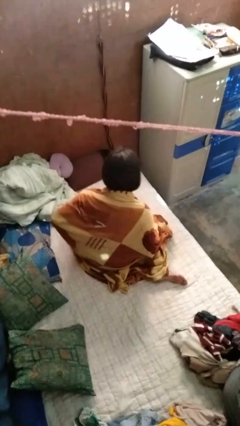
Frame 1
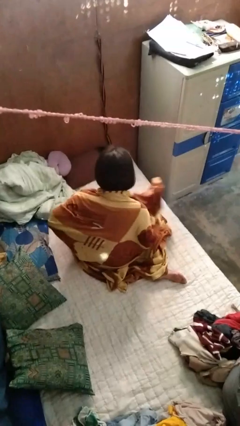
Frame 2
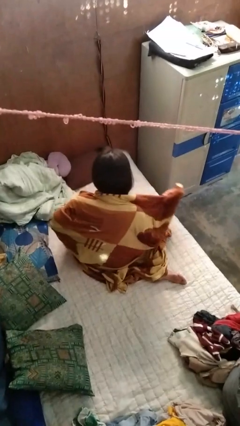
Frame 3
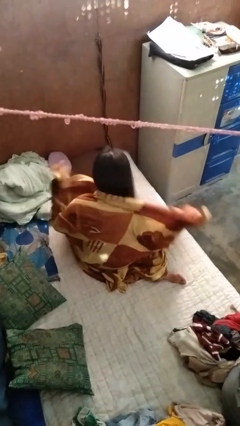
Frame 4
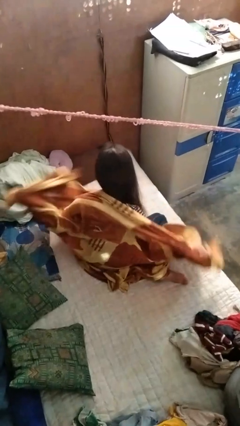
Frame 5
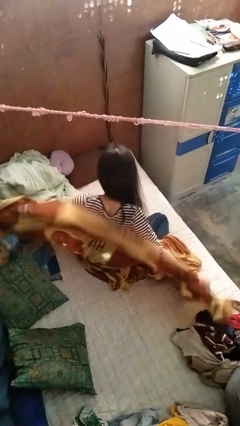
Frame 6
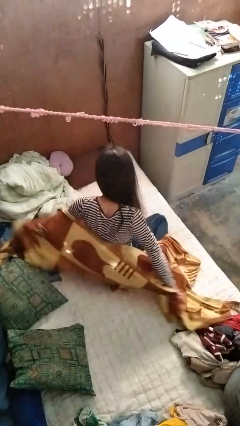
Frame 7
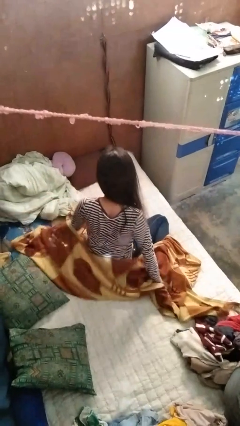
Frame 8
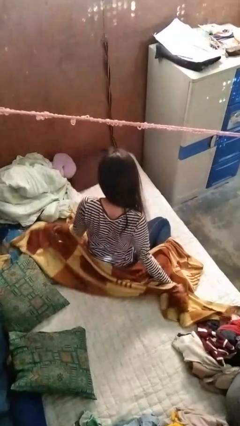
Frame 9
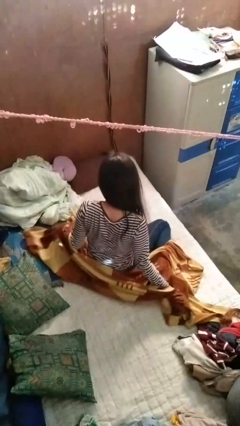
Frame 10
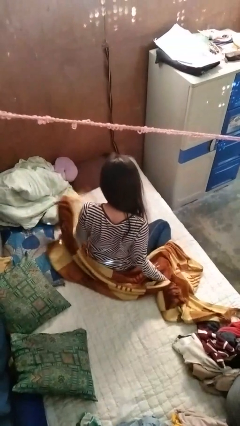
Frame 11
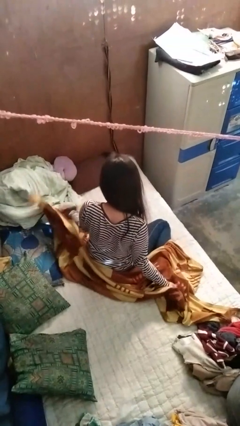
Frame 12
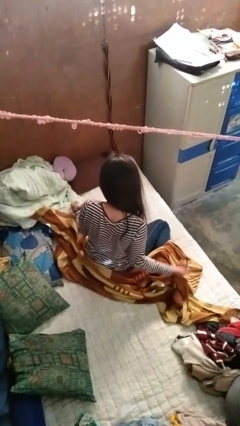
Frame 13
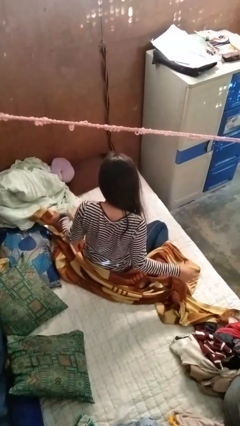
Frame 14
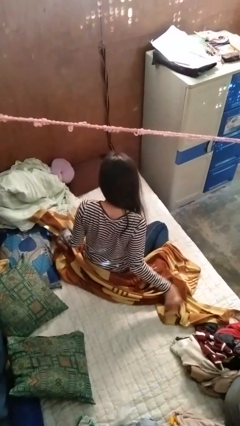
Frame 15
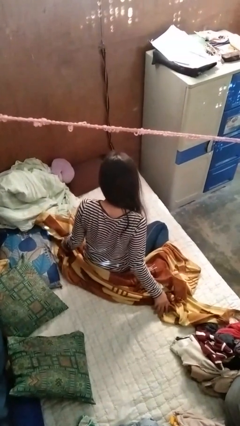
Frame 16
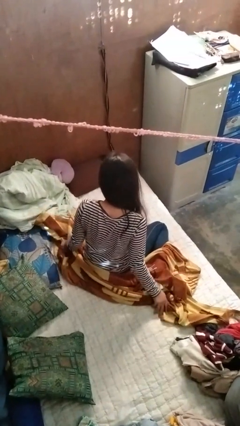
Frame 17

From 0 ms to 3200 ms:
person uncovers with blanket

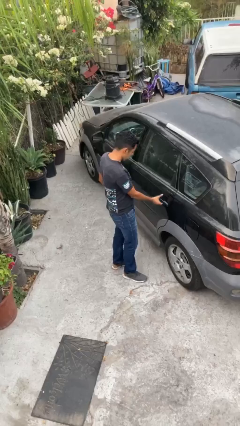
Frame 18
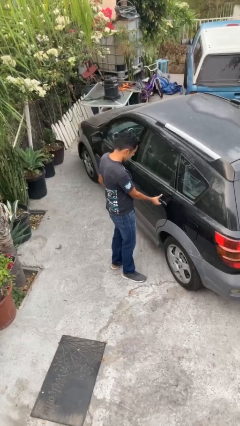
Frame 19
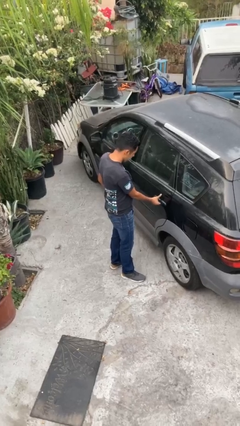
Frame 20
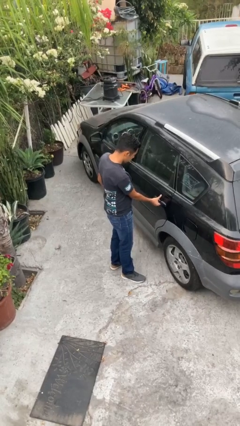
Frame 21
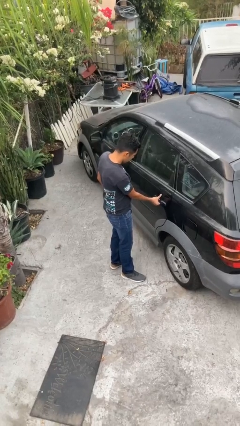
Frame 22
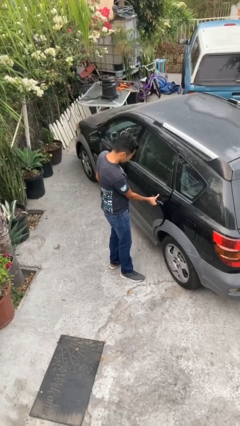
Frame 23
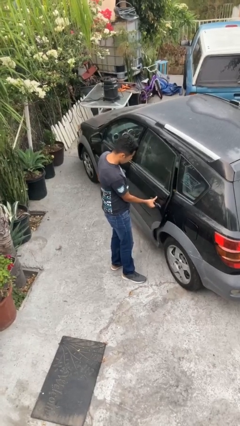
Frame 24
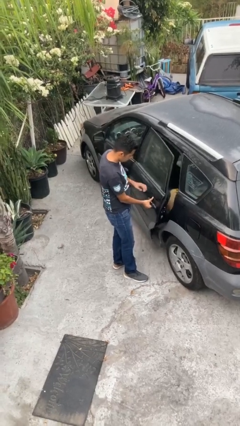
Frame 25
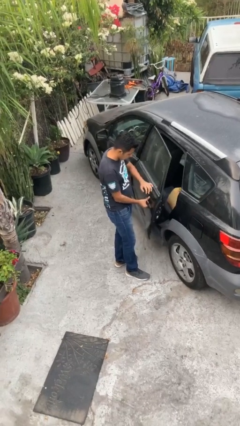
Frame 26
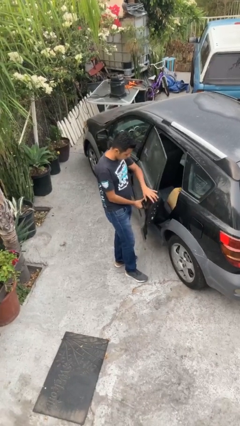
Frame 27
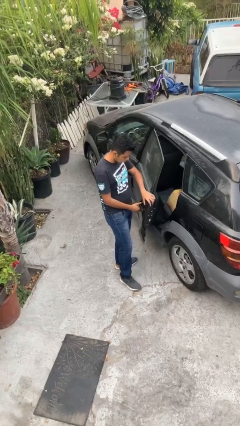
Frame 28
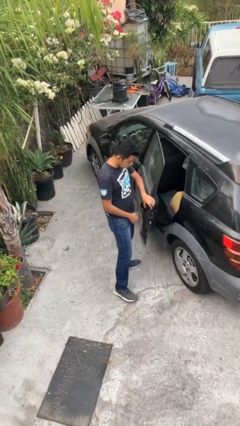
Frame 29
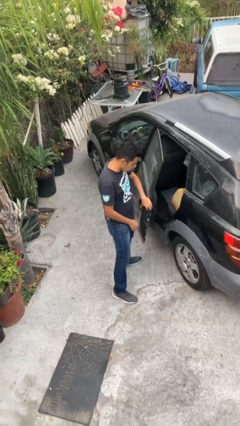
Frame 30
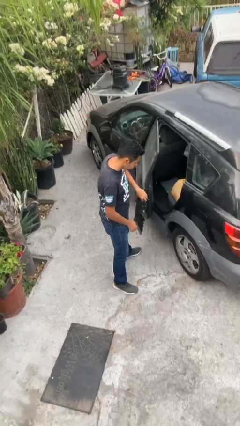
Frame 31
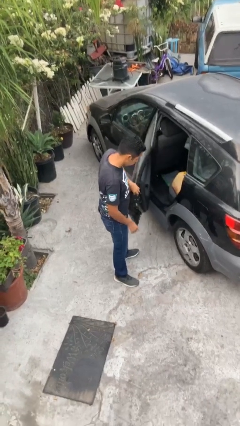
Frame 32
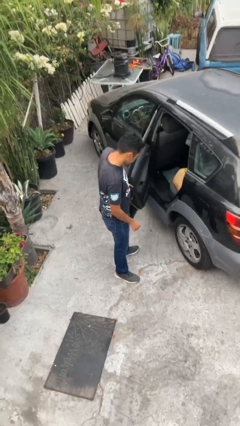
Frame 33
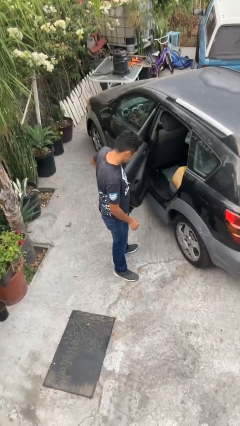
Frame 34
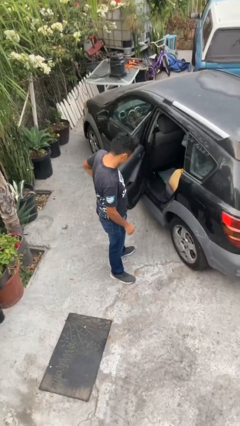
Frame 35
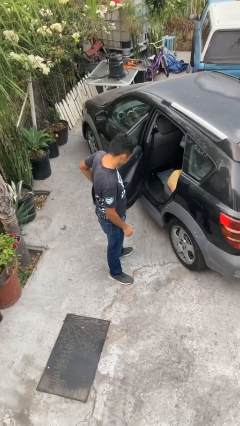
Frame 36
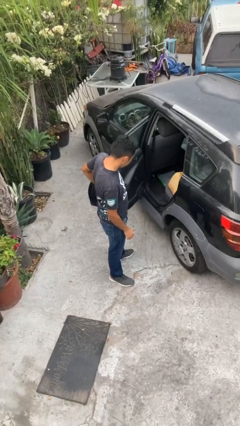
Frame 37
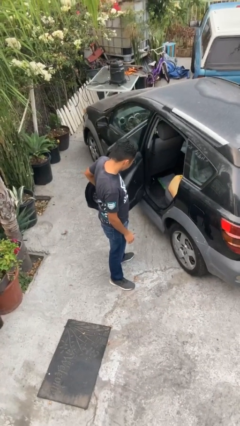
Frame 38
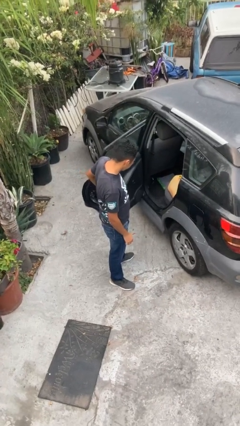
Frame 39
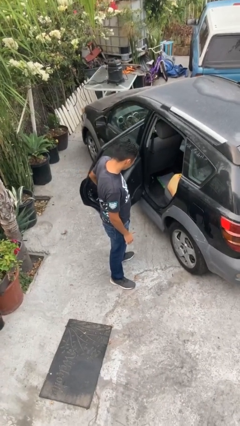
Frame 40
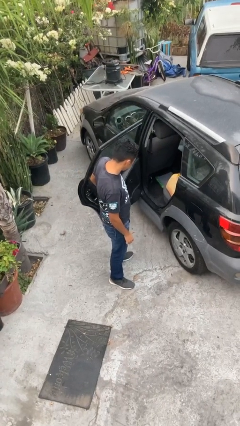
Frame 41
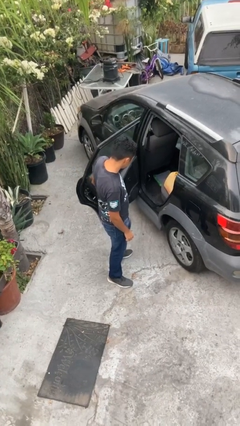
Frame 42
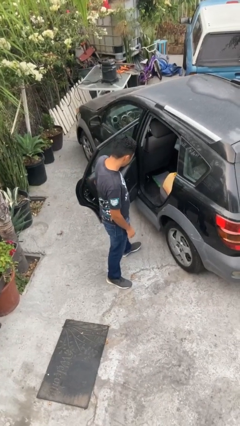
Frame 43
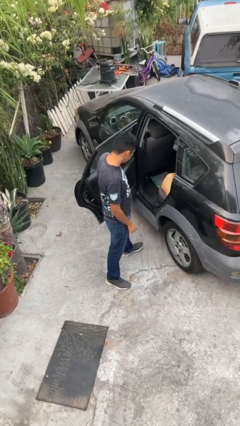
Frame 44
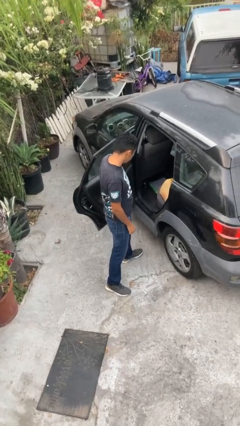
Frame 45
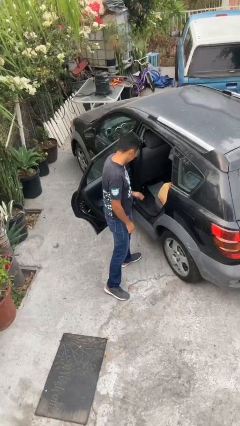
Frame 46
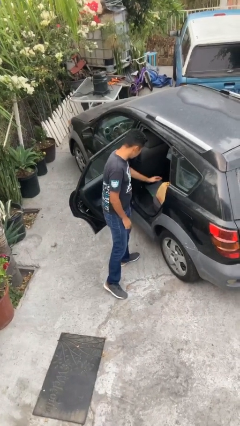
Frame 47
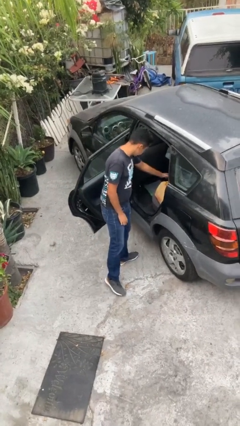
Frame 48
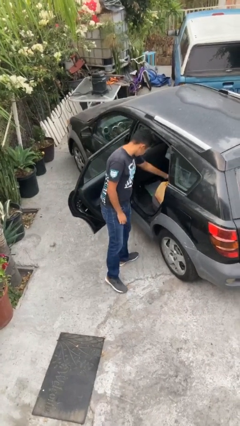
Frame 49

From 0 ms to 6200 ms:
person opens car door

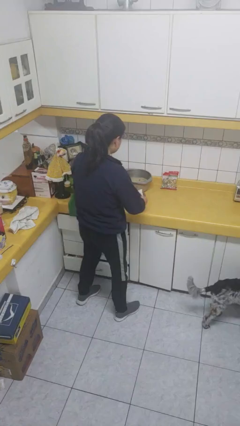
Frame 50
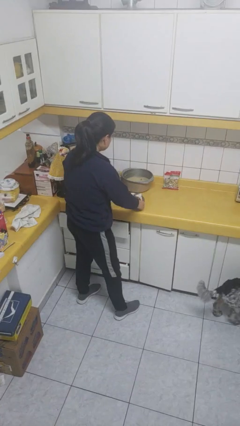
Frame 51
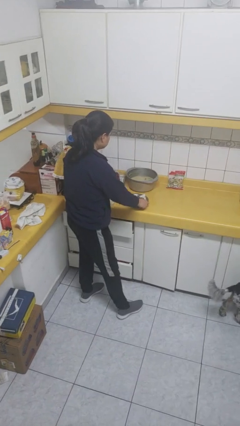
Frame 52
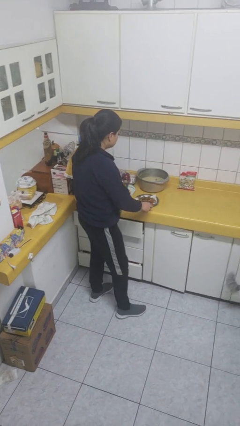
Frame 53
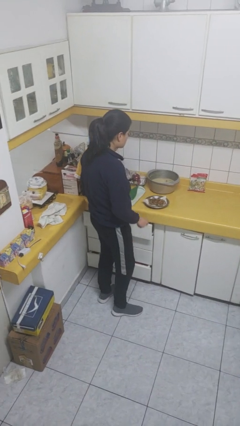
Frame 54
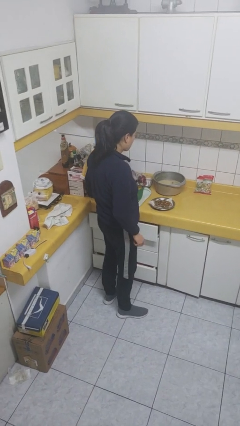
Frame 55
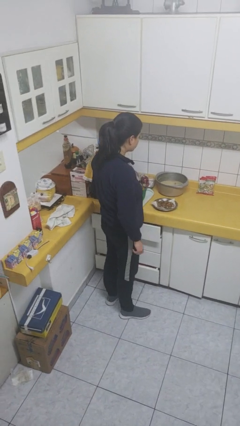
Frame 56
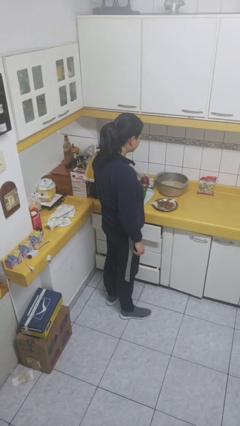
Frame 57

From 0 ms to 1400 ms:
person puts down object on countertop

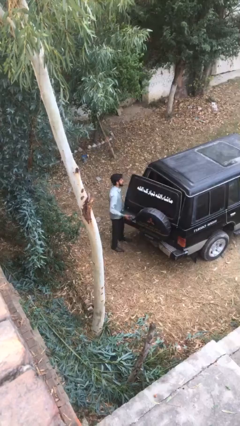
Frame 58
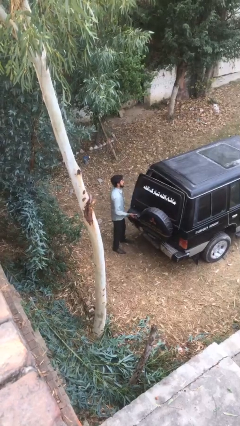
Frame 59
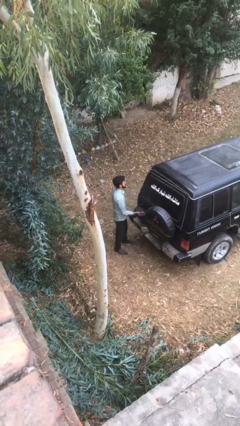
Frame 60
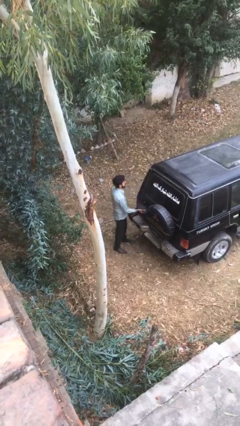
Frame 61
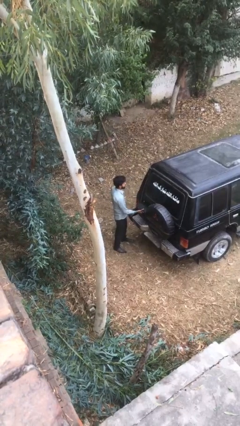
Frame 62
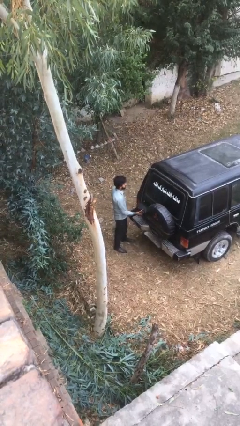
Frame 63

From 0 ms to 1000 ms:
person closes car trunk

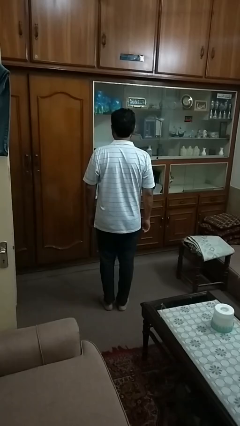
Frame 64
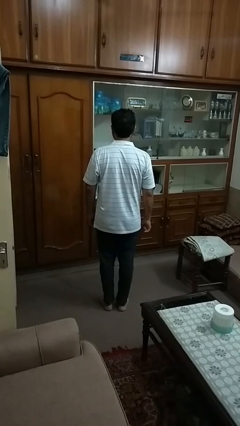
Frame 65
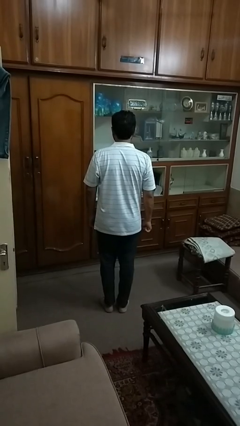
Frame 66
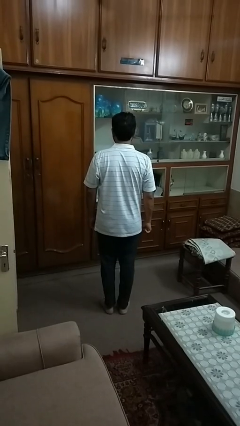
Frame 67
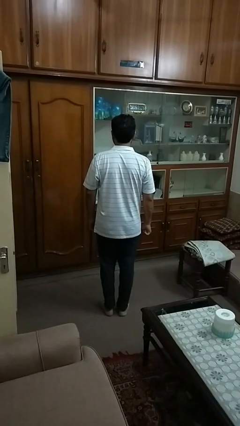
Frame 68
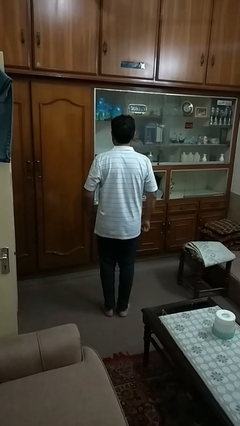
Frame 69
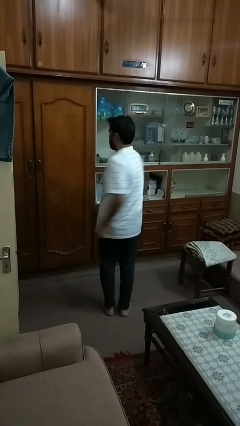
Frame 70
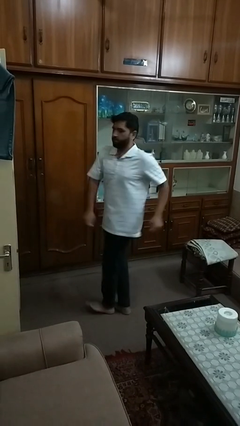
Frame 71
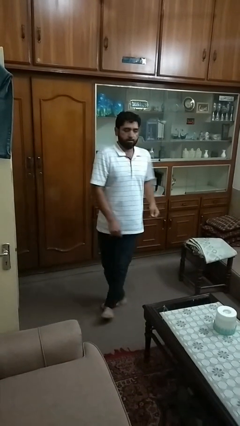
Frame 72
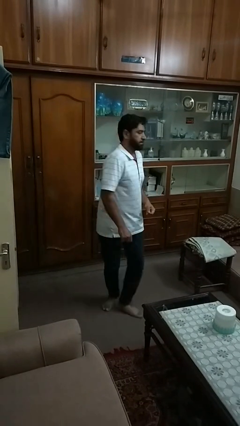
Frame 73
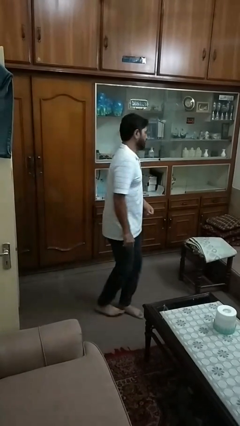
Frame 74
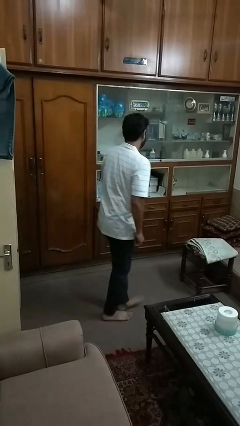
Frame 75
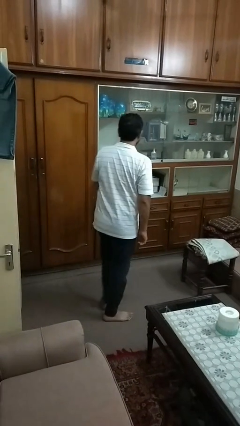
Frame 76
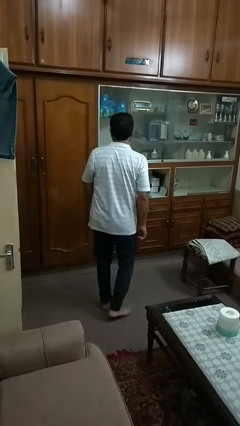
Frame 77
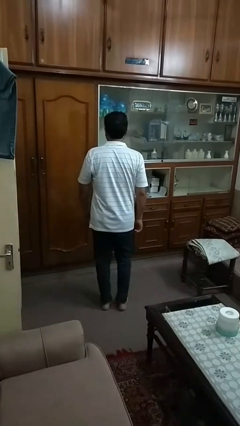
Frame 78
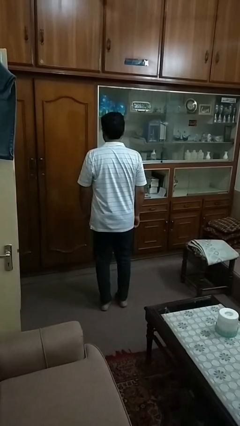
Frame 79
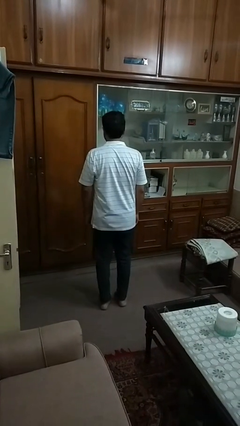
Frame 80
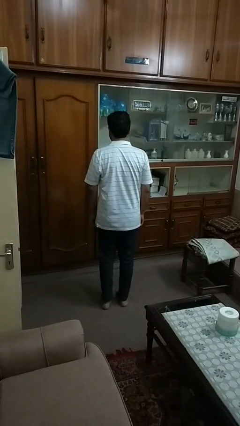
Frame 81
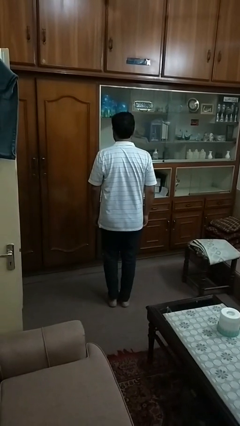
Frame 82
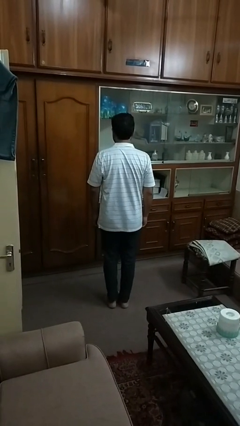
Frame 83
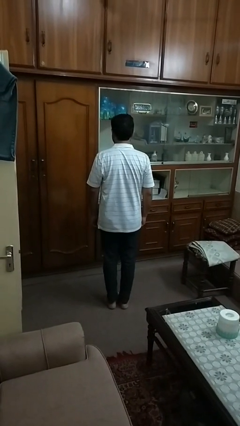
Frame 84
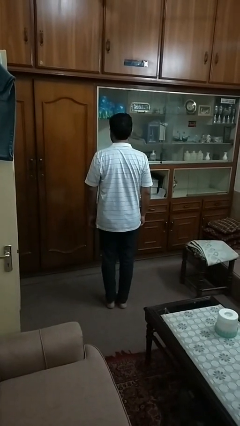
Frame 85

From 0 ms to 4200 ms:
person twirls

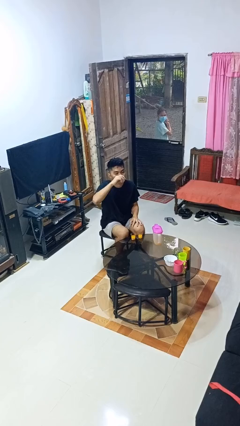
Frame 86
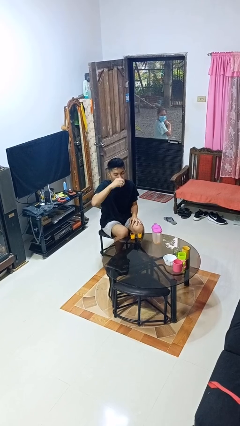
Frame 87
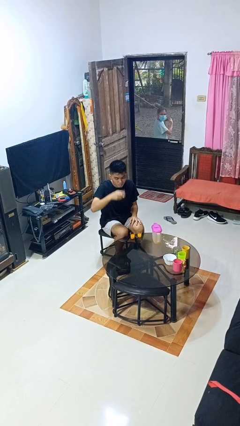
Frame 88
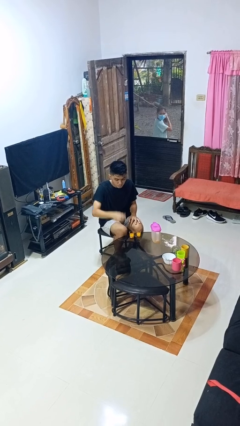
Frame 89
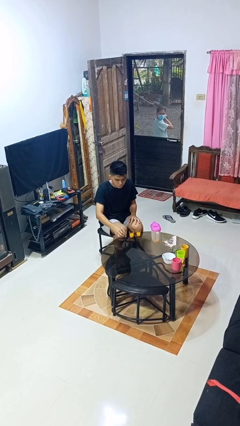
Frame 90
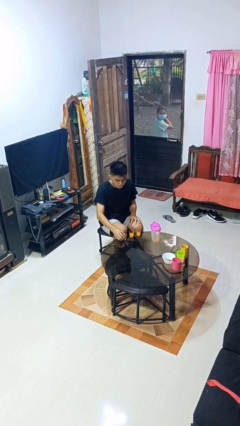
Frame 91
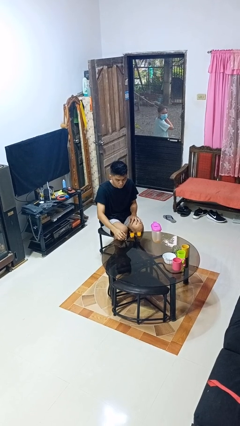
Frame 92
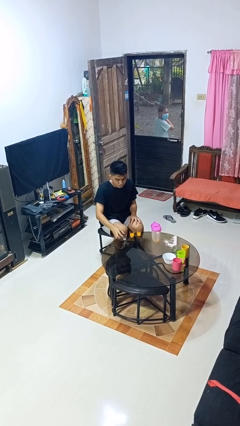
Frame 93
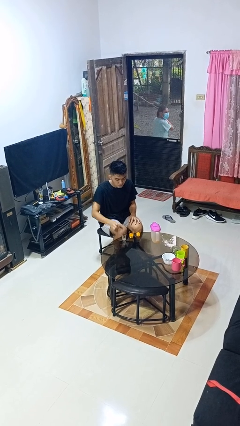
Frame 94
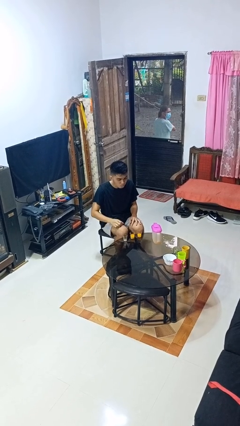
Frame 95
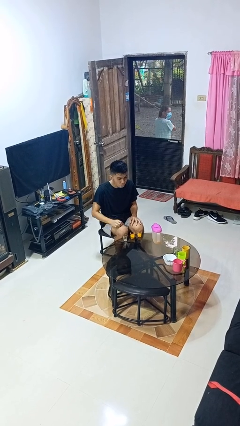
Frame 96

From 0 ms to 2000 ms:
person puts down object on table
